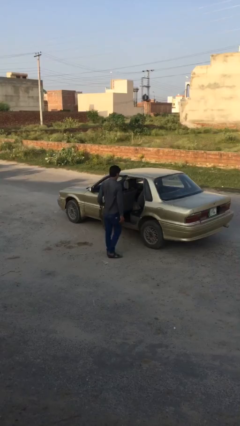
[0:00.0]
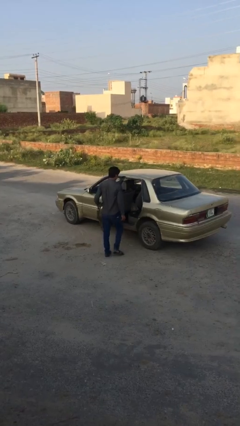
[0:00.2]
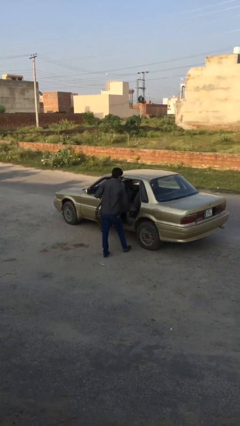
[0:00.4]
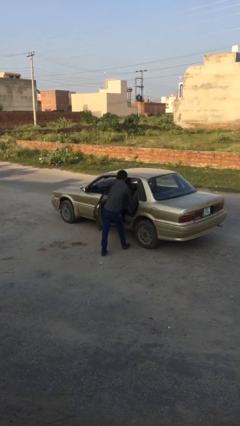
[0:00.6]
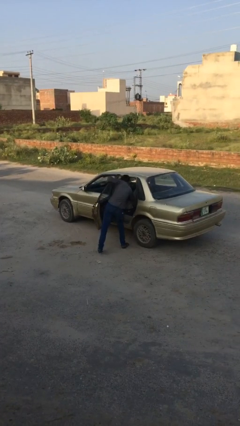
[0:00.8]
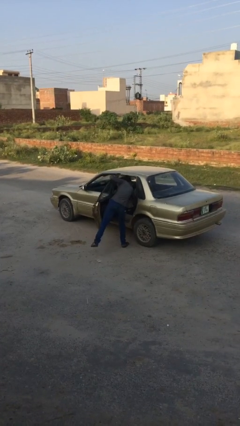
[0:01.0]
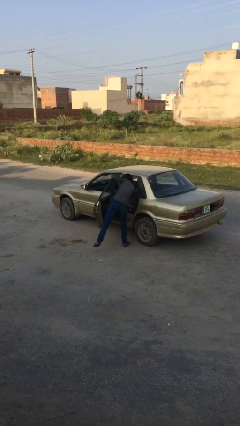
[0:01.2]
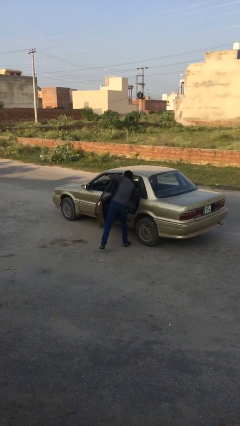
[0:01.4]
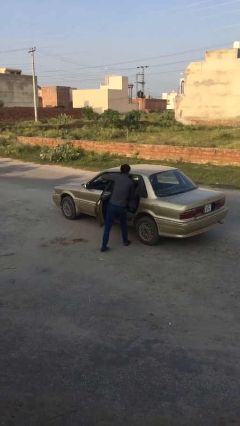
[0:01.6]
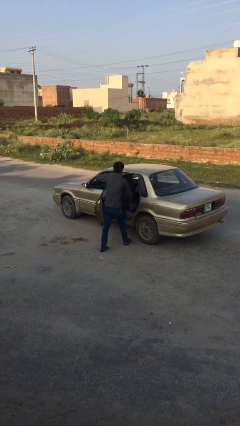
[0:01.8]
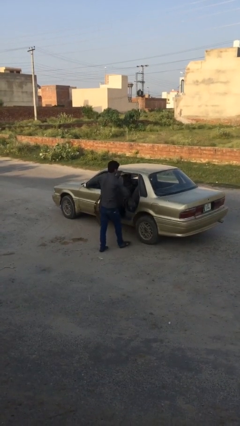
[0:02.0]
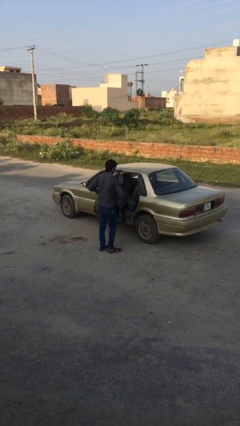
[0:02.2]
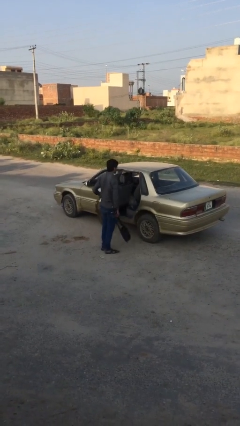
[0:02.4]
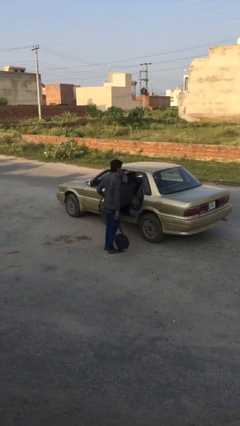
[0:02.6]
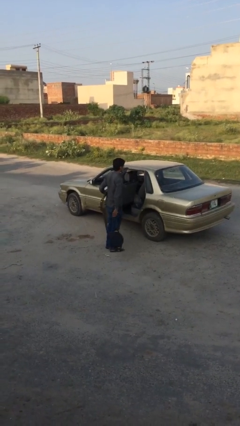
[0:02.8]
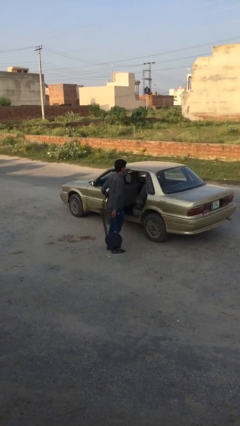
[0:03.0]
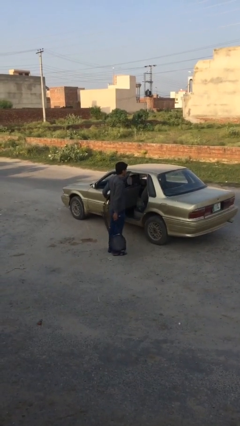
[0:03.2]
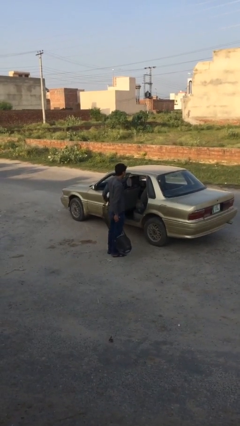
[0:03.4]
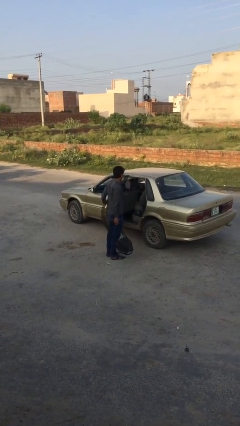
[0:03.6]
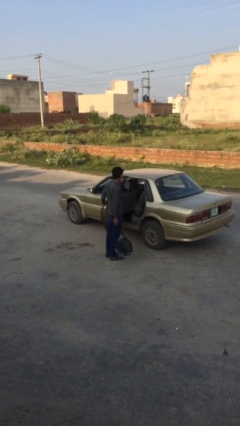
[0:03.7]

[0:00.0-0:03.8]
person unloads car

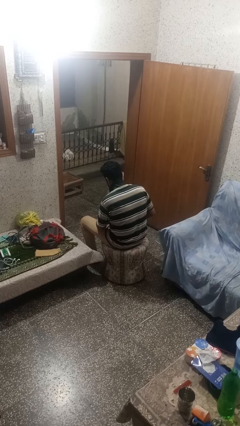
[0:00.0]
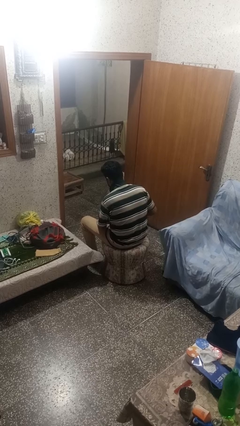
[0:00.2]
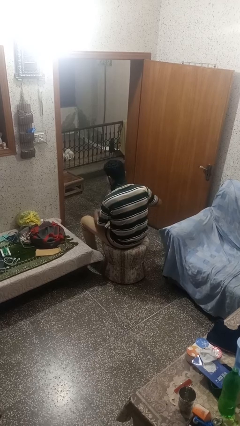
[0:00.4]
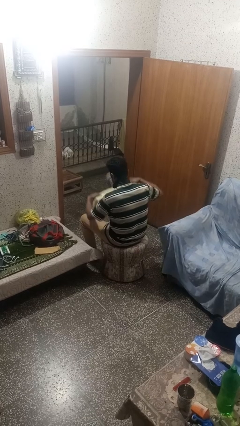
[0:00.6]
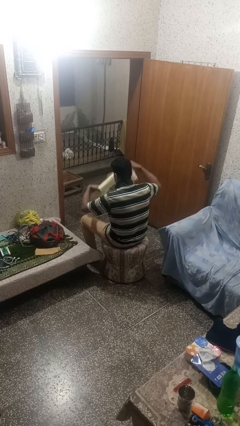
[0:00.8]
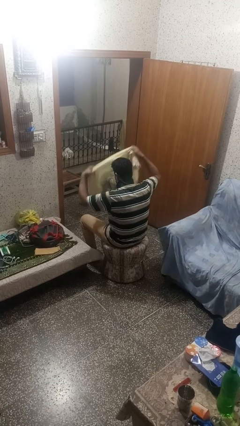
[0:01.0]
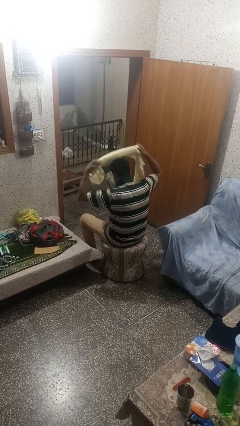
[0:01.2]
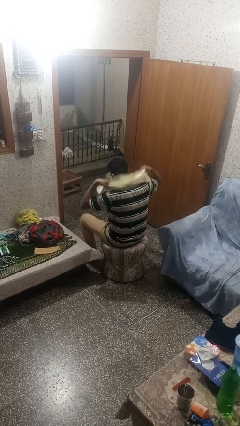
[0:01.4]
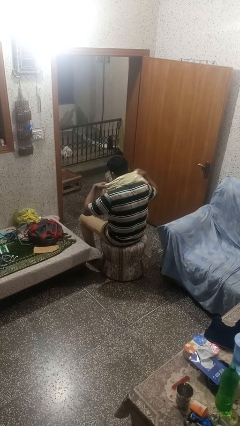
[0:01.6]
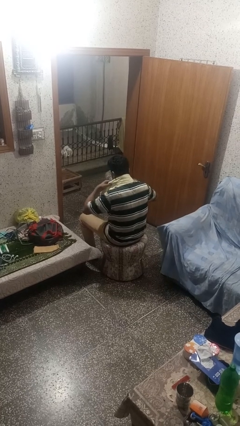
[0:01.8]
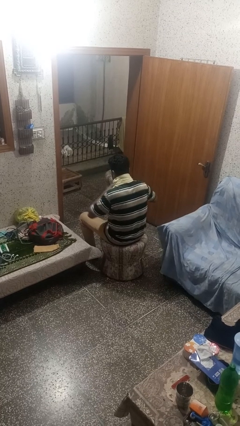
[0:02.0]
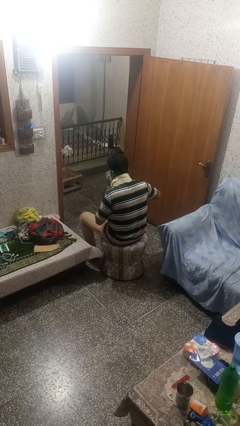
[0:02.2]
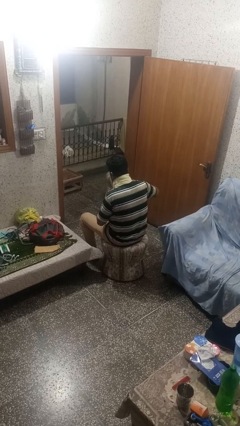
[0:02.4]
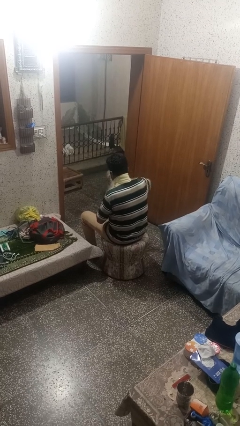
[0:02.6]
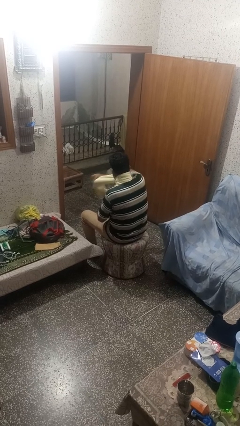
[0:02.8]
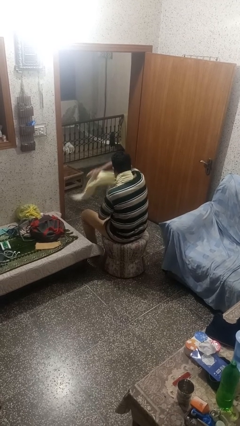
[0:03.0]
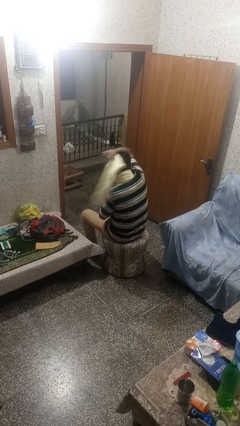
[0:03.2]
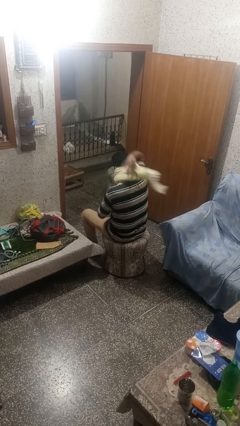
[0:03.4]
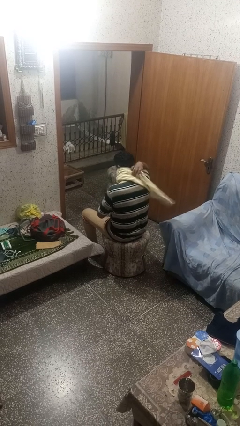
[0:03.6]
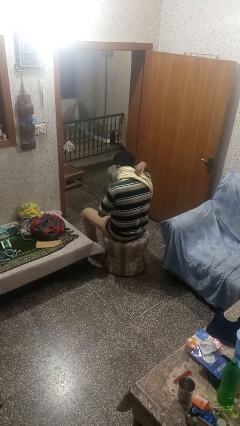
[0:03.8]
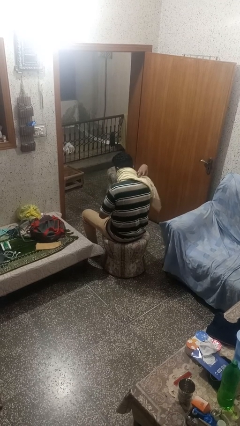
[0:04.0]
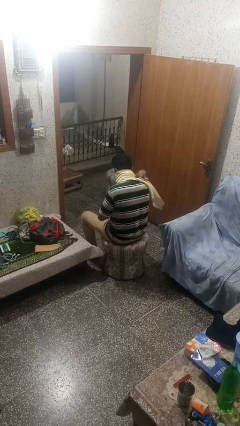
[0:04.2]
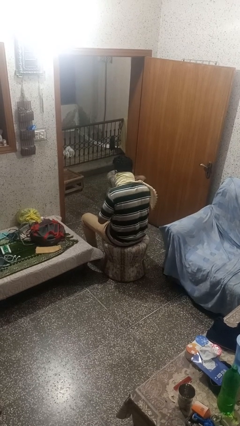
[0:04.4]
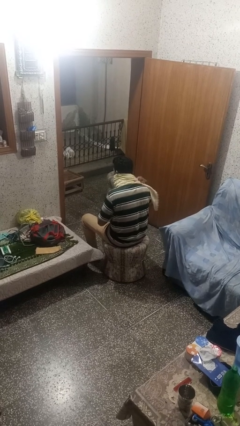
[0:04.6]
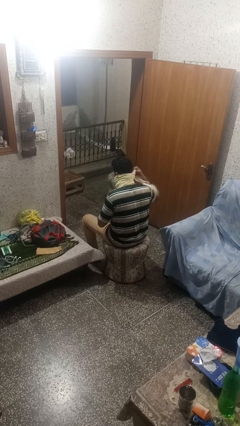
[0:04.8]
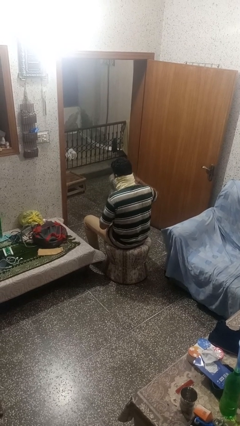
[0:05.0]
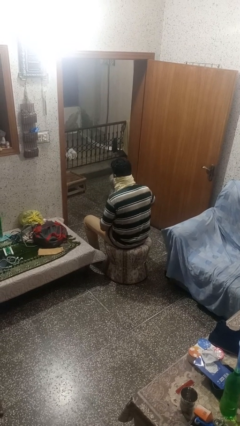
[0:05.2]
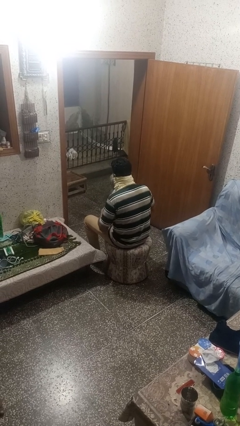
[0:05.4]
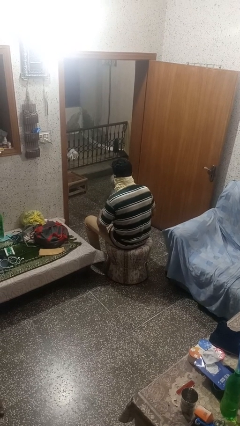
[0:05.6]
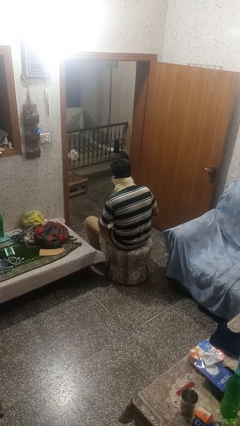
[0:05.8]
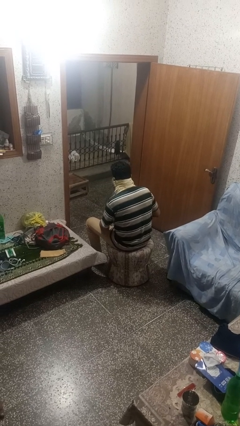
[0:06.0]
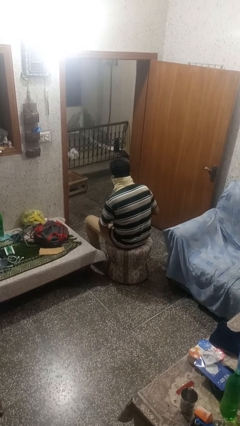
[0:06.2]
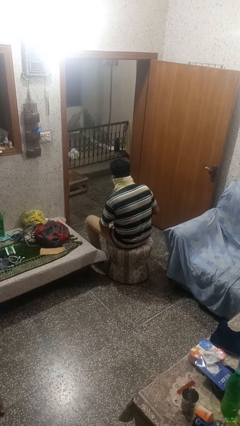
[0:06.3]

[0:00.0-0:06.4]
person puts on scarf

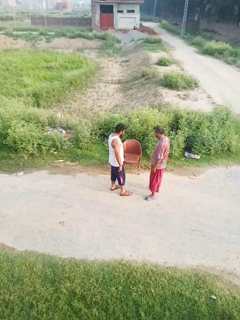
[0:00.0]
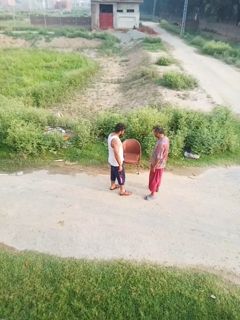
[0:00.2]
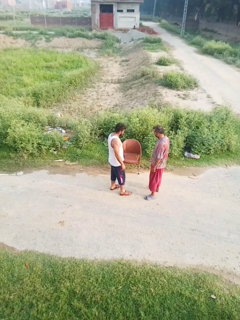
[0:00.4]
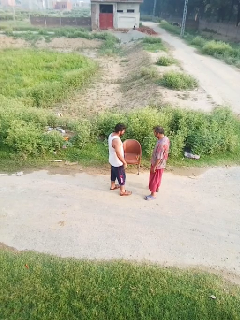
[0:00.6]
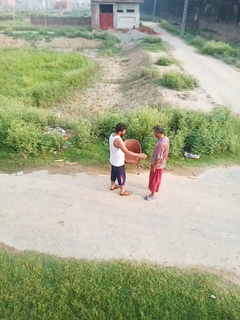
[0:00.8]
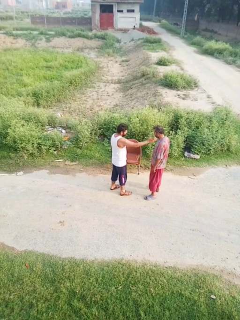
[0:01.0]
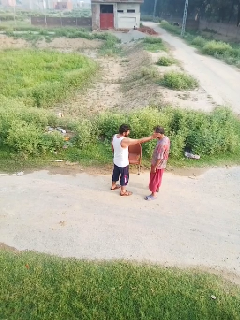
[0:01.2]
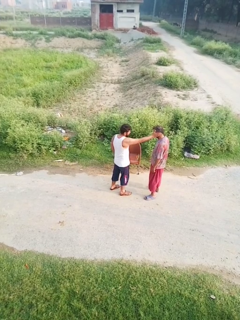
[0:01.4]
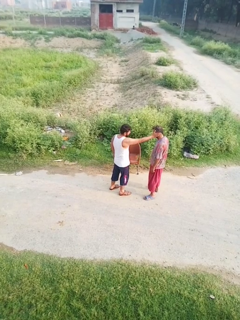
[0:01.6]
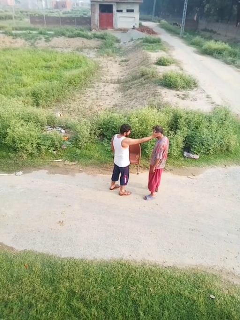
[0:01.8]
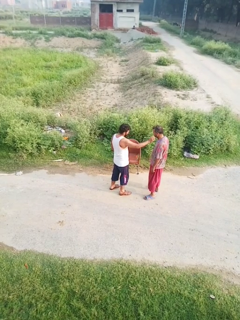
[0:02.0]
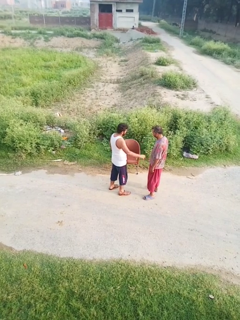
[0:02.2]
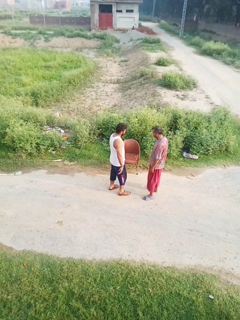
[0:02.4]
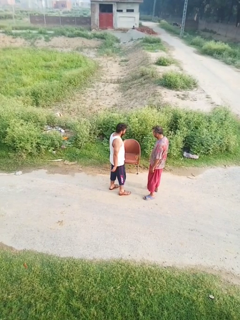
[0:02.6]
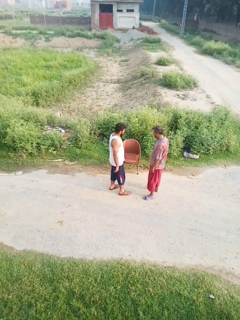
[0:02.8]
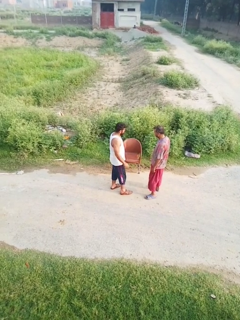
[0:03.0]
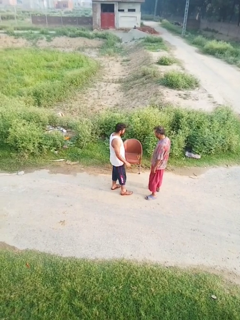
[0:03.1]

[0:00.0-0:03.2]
person touches face of person

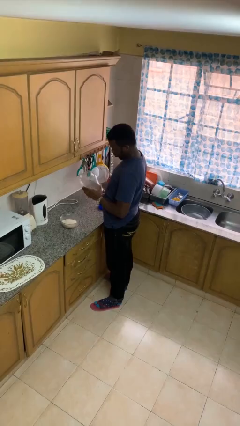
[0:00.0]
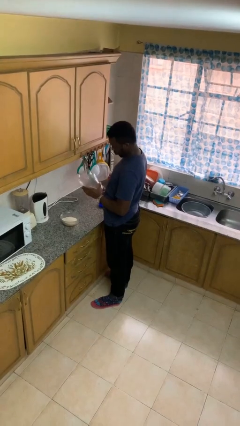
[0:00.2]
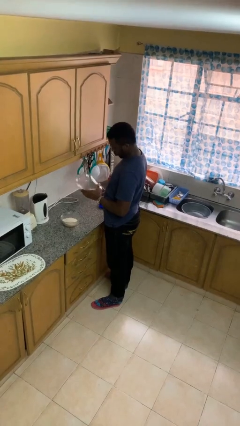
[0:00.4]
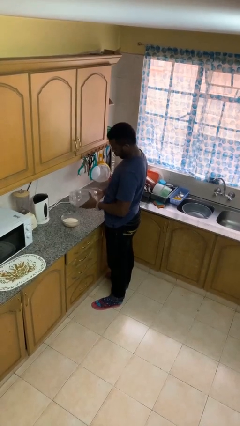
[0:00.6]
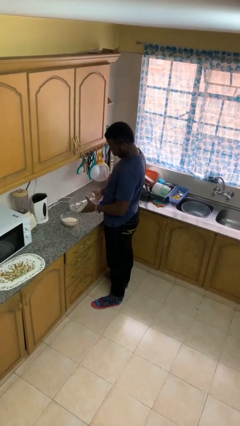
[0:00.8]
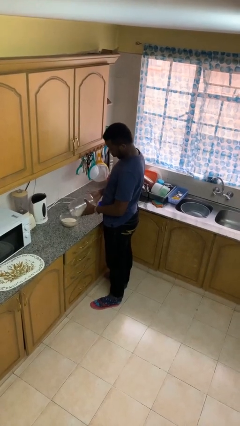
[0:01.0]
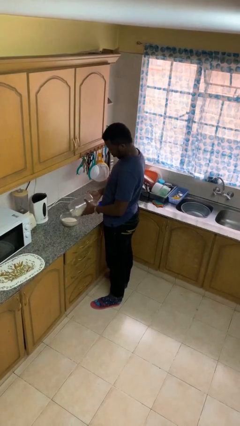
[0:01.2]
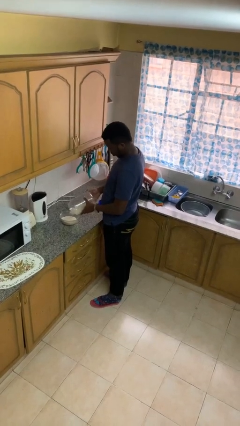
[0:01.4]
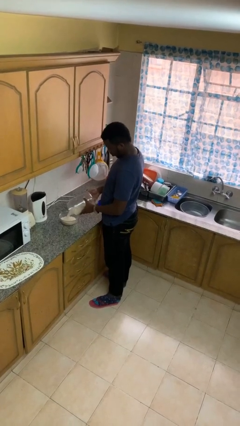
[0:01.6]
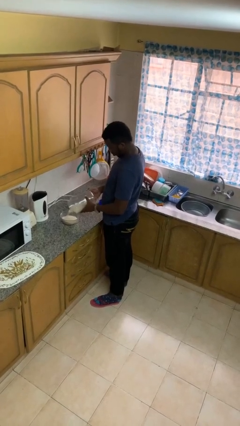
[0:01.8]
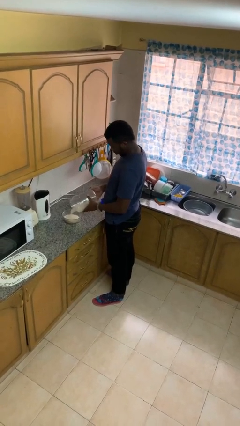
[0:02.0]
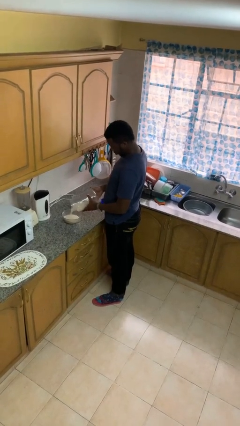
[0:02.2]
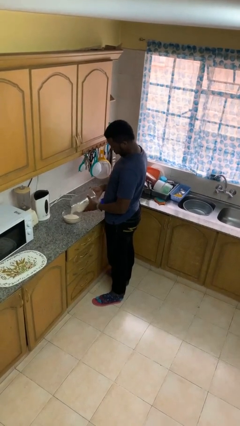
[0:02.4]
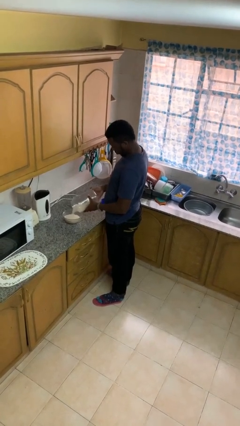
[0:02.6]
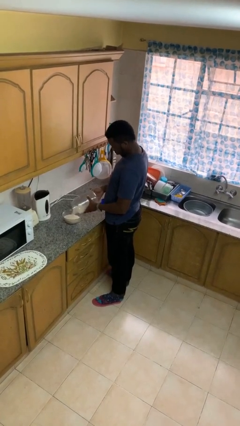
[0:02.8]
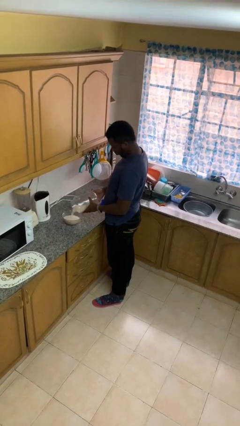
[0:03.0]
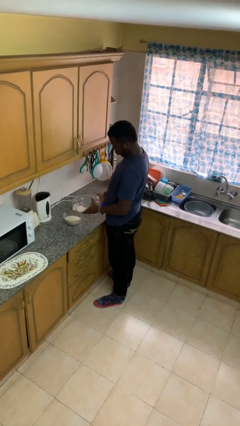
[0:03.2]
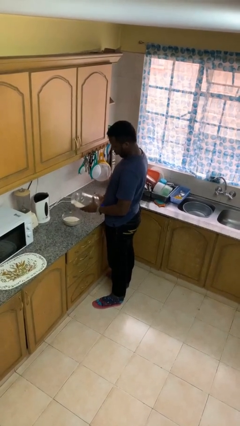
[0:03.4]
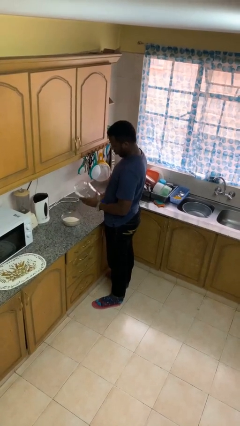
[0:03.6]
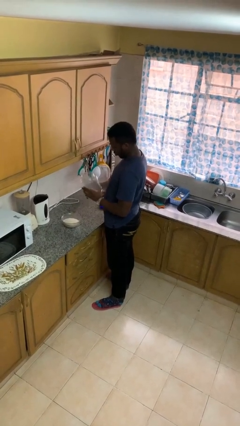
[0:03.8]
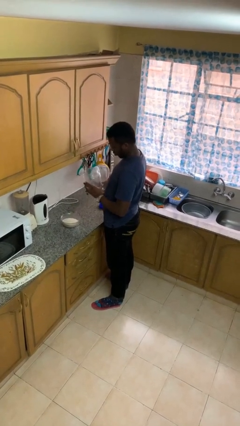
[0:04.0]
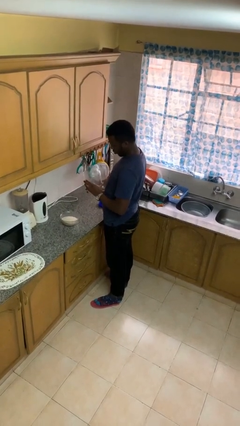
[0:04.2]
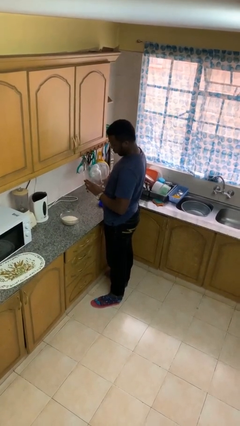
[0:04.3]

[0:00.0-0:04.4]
person pours into bowl

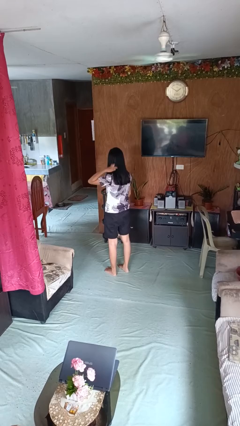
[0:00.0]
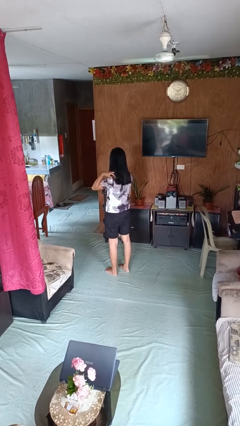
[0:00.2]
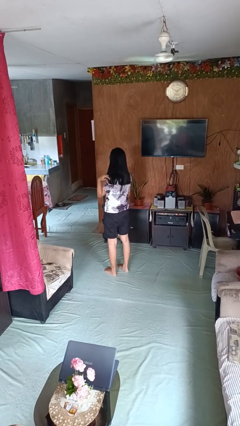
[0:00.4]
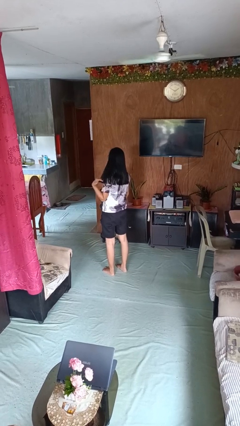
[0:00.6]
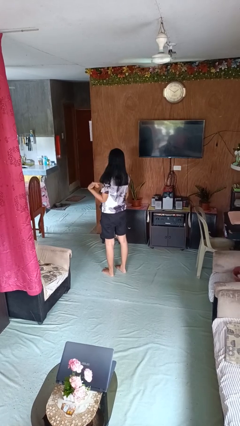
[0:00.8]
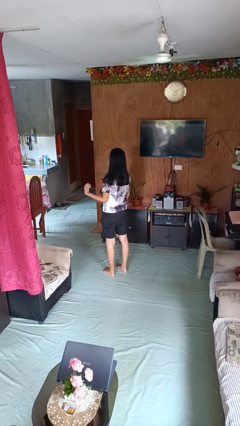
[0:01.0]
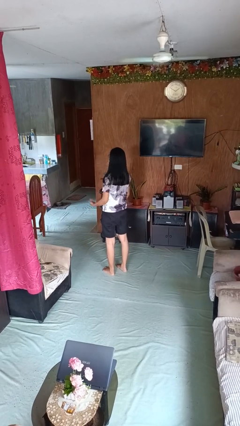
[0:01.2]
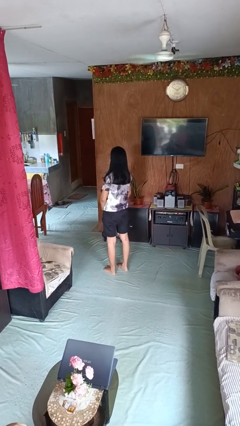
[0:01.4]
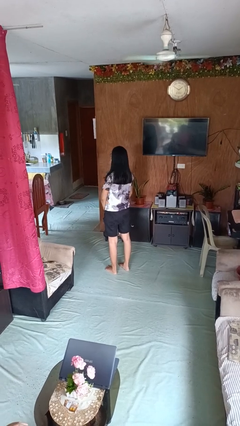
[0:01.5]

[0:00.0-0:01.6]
person strokes hair
